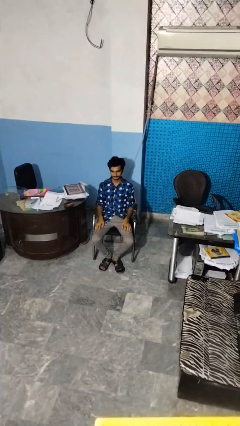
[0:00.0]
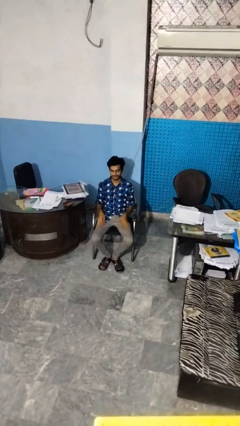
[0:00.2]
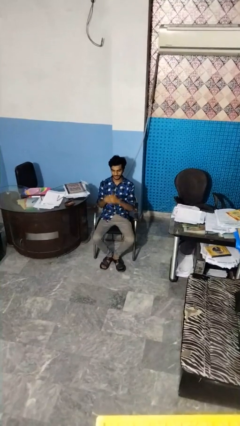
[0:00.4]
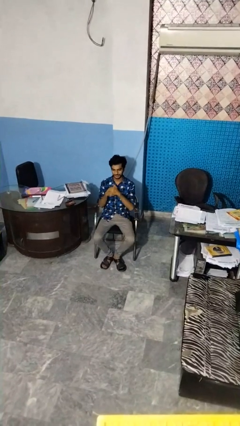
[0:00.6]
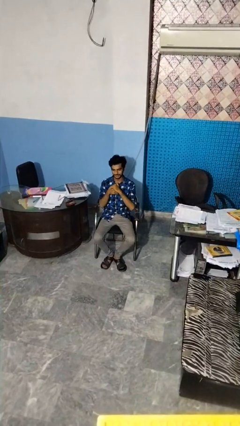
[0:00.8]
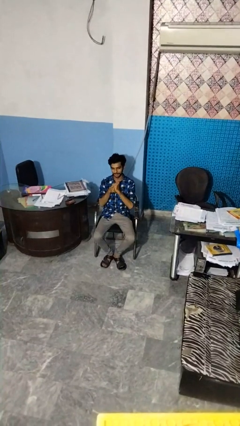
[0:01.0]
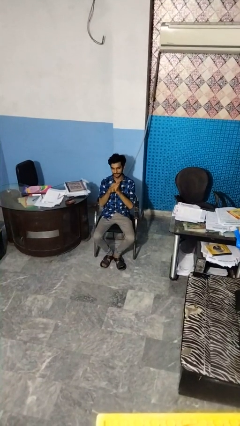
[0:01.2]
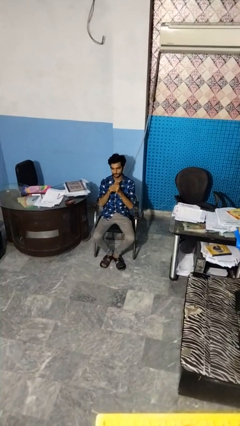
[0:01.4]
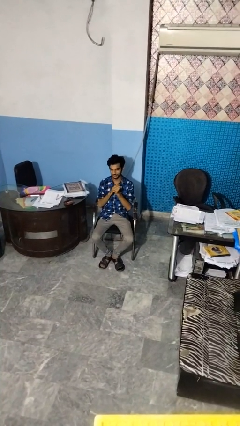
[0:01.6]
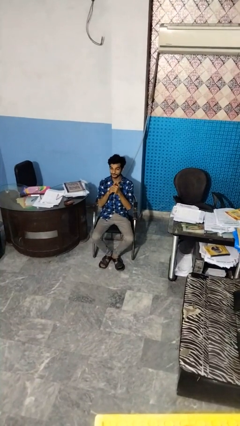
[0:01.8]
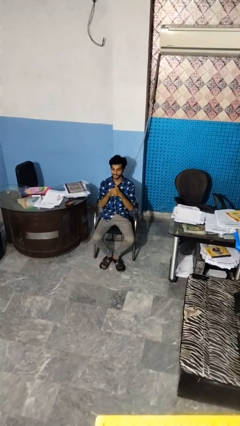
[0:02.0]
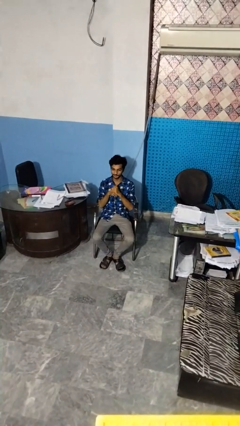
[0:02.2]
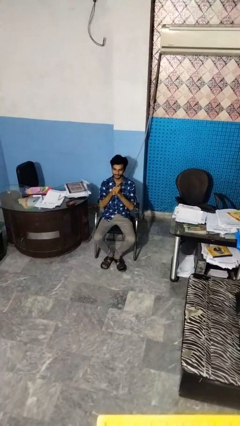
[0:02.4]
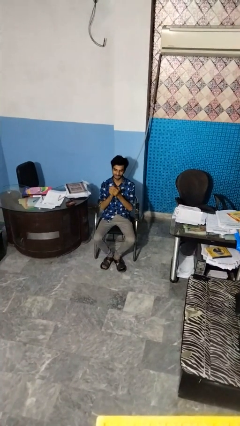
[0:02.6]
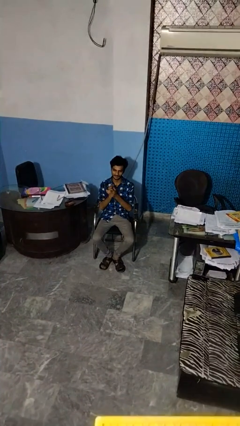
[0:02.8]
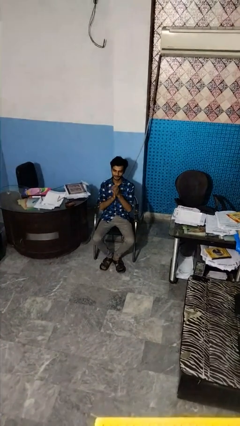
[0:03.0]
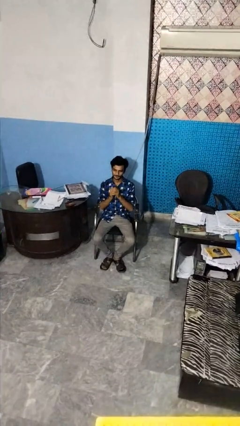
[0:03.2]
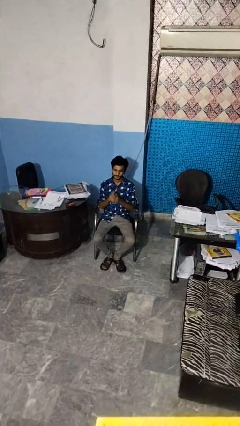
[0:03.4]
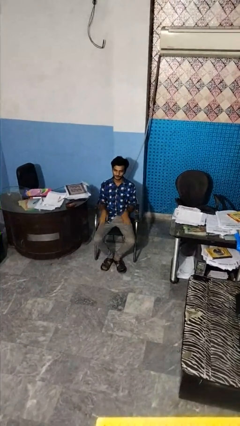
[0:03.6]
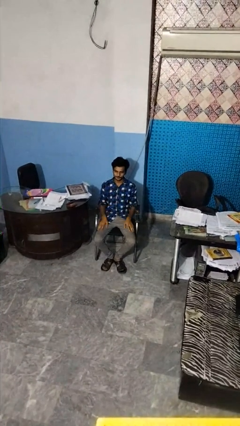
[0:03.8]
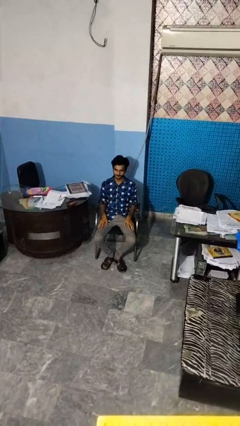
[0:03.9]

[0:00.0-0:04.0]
person cracks knuckles

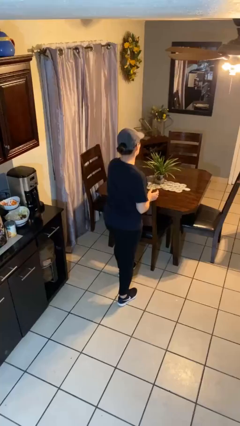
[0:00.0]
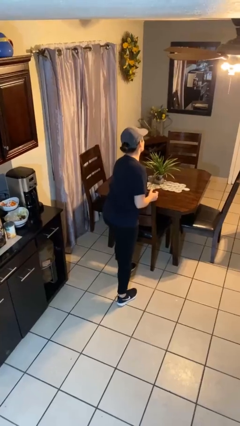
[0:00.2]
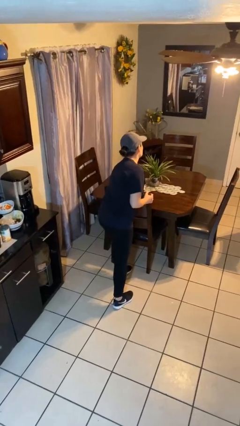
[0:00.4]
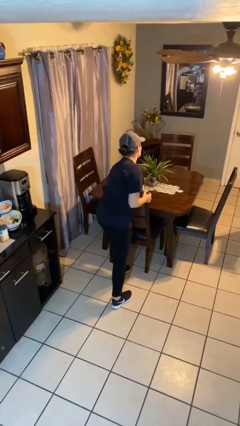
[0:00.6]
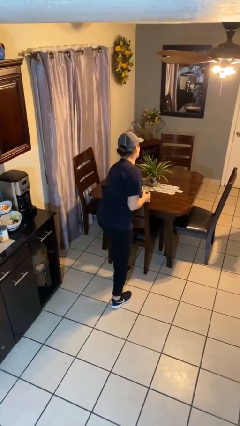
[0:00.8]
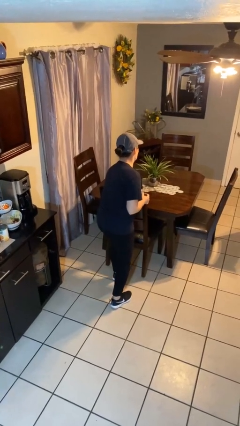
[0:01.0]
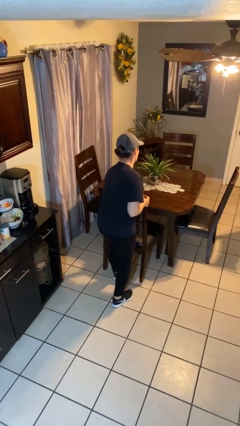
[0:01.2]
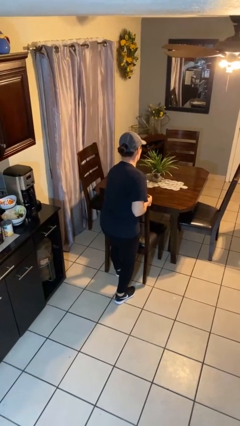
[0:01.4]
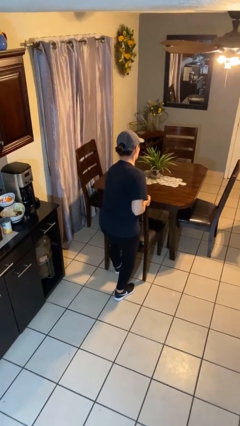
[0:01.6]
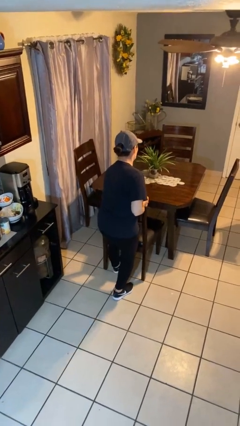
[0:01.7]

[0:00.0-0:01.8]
person pulls out chair

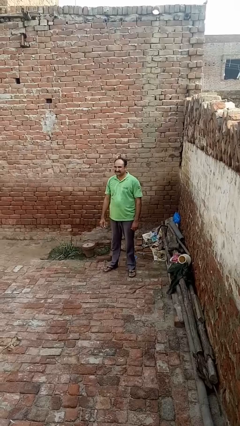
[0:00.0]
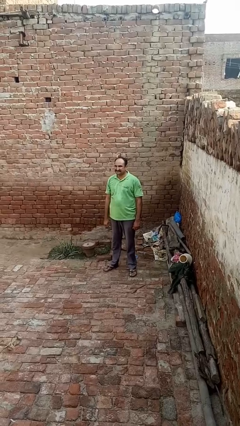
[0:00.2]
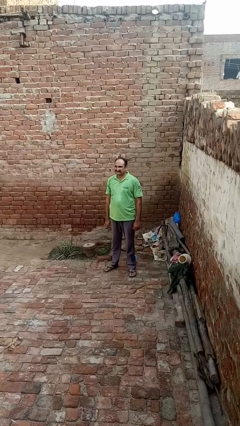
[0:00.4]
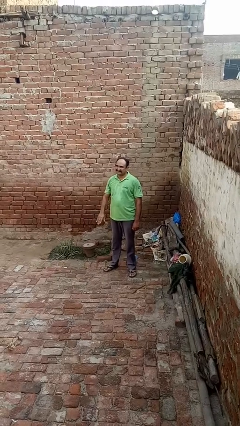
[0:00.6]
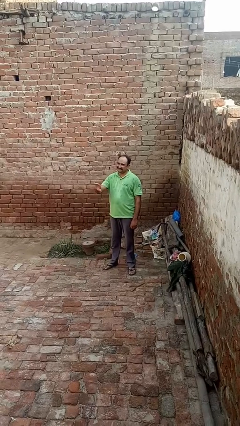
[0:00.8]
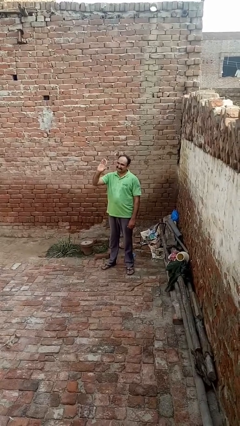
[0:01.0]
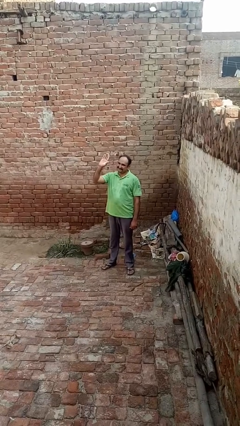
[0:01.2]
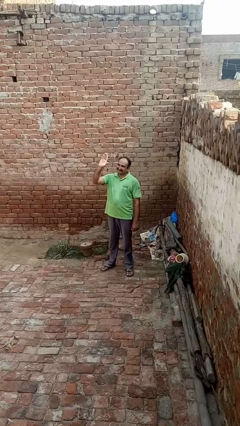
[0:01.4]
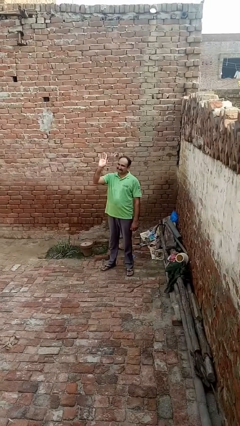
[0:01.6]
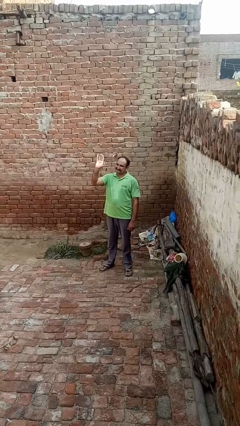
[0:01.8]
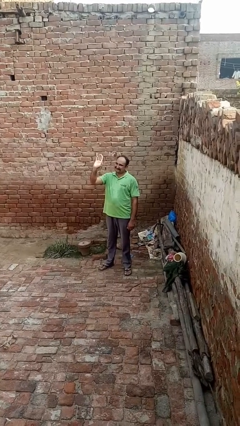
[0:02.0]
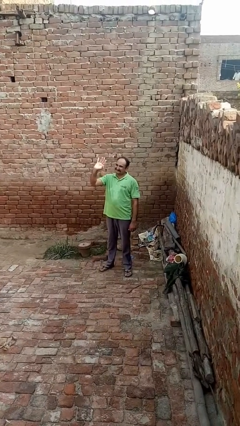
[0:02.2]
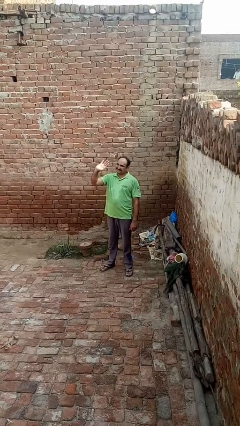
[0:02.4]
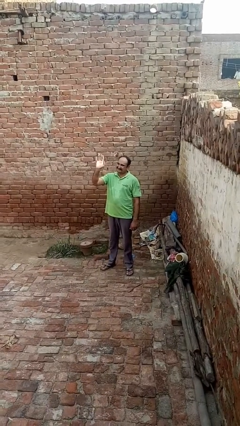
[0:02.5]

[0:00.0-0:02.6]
person waves at person

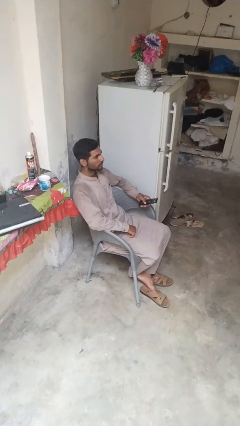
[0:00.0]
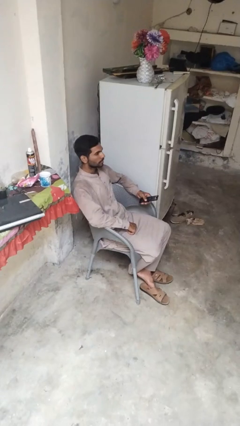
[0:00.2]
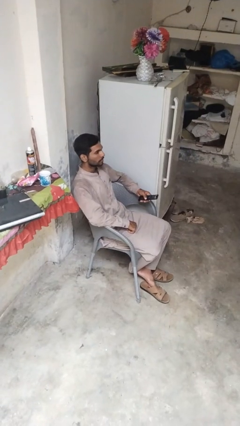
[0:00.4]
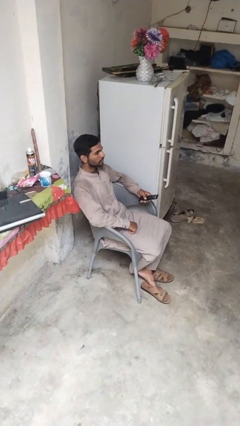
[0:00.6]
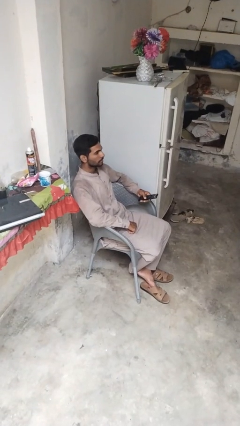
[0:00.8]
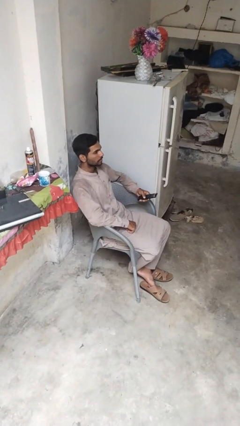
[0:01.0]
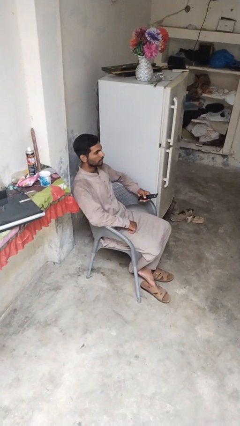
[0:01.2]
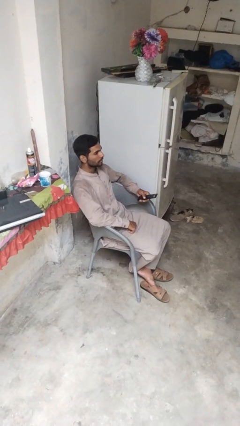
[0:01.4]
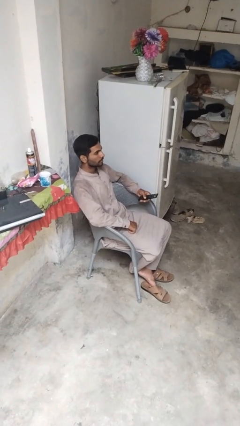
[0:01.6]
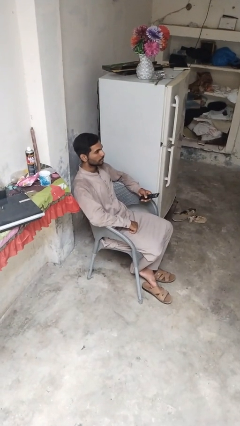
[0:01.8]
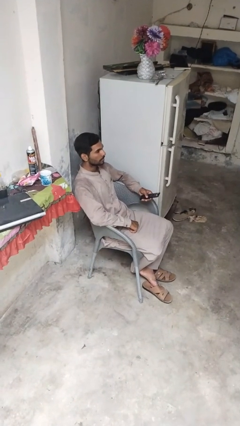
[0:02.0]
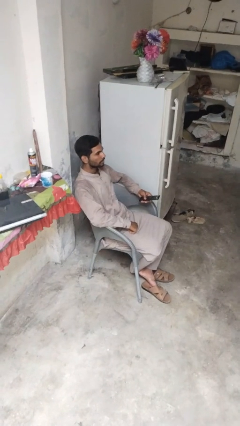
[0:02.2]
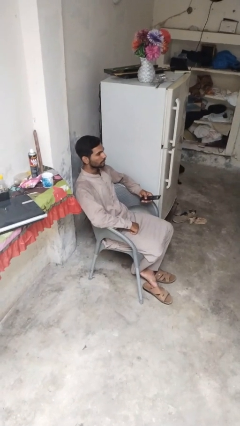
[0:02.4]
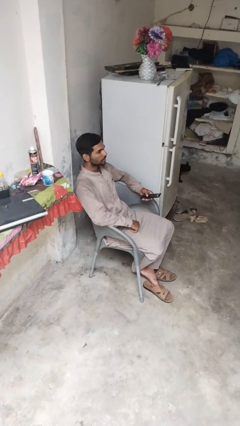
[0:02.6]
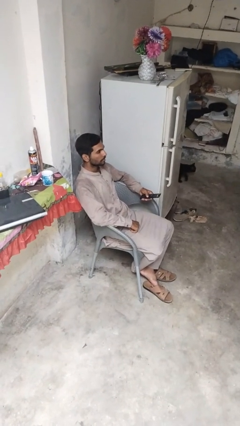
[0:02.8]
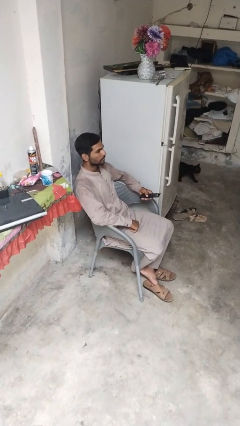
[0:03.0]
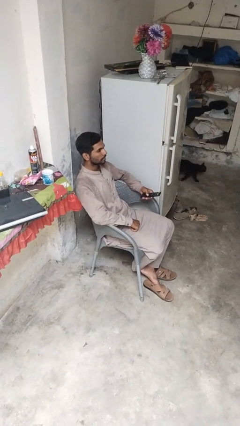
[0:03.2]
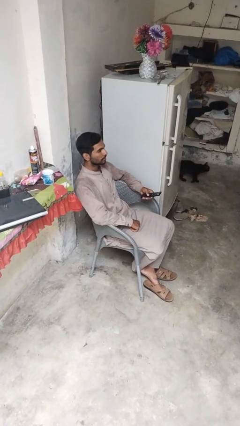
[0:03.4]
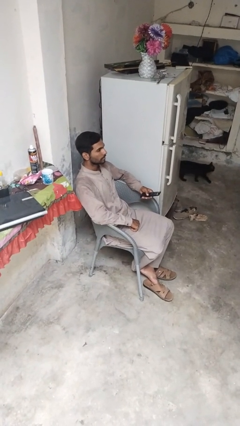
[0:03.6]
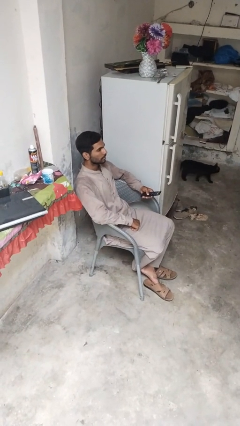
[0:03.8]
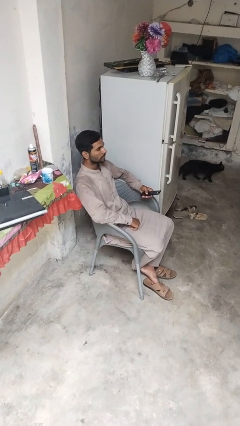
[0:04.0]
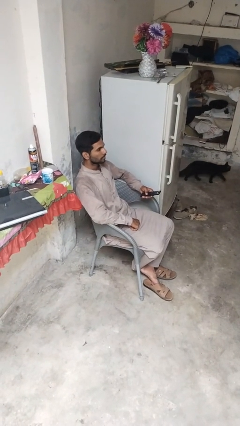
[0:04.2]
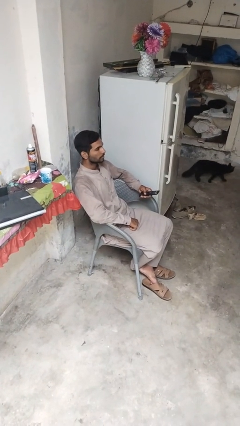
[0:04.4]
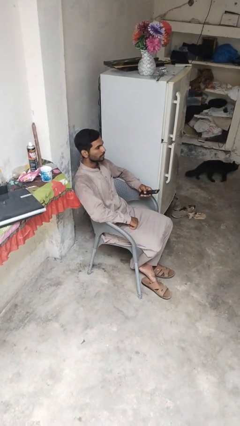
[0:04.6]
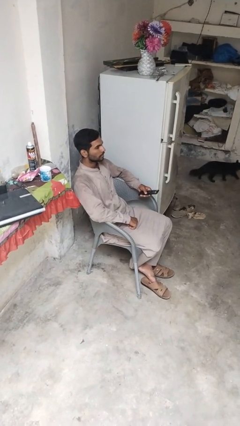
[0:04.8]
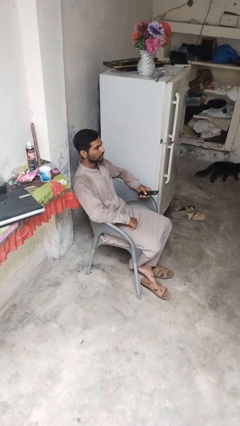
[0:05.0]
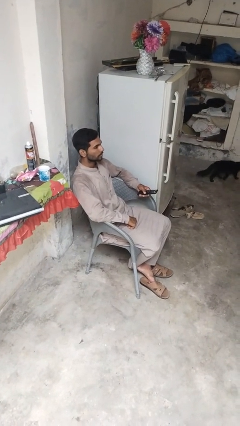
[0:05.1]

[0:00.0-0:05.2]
person uses television remote

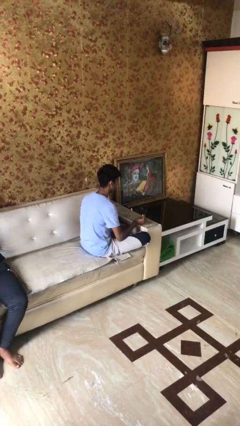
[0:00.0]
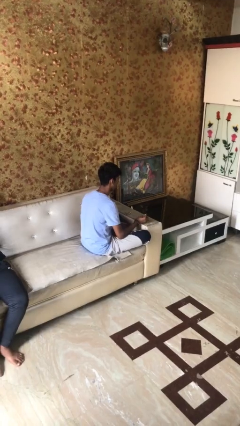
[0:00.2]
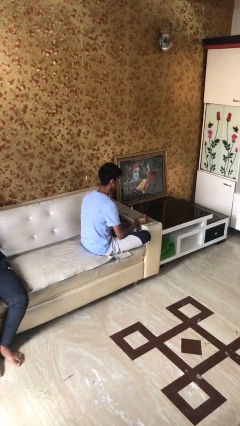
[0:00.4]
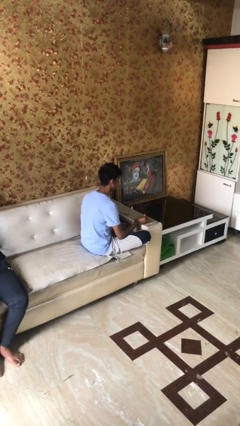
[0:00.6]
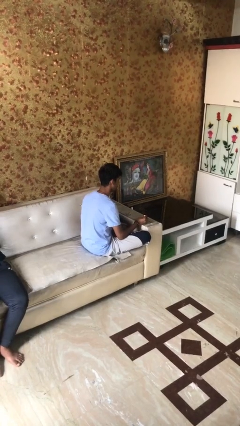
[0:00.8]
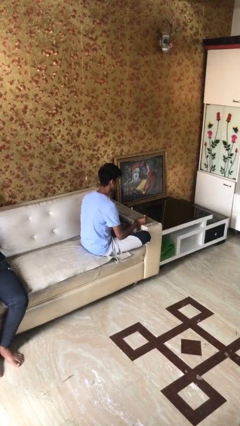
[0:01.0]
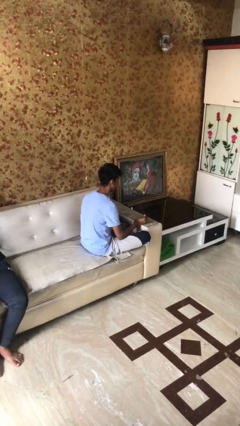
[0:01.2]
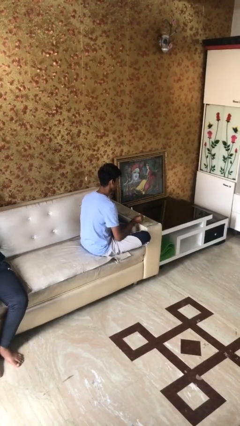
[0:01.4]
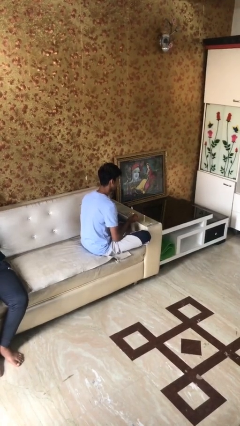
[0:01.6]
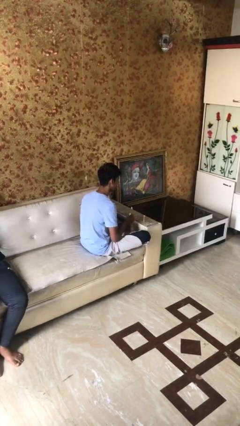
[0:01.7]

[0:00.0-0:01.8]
person lights candle

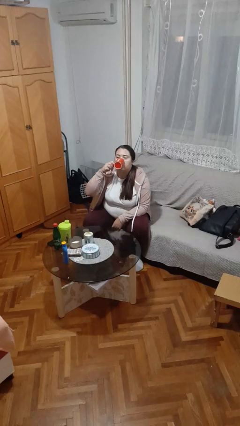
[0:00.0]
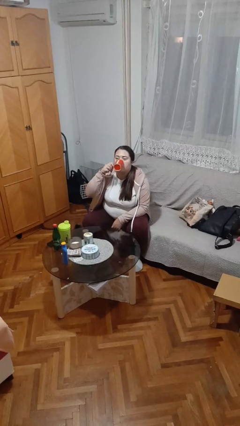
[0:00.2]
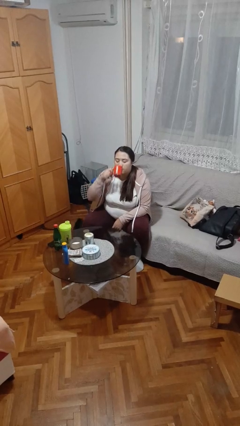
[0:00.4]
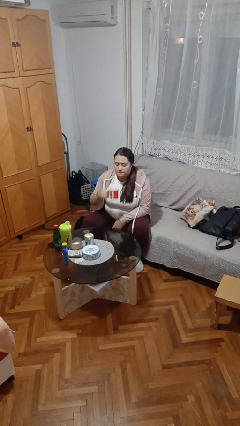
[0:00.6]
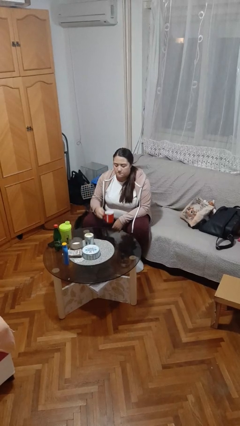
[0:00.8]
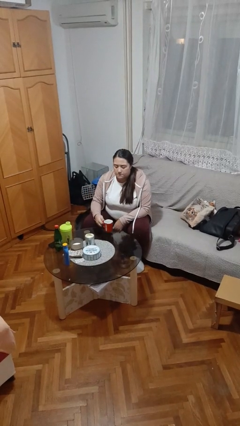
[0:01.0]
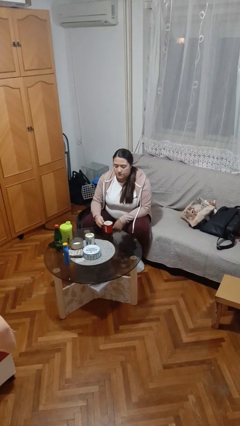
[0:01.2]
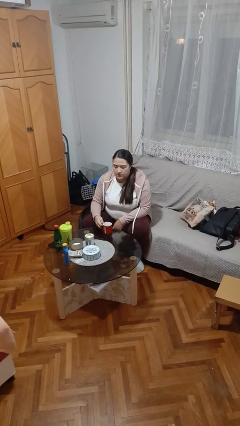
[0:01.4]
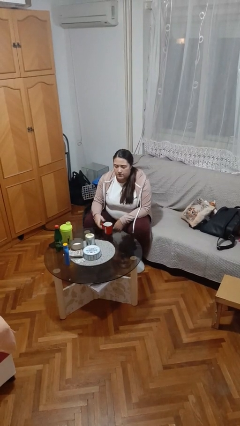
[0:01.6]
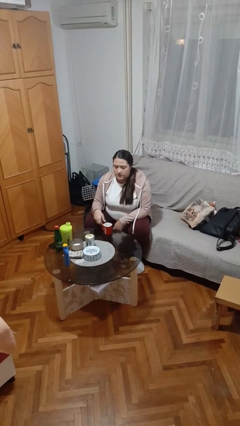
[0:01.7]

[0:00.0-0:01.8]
person puts down object on table

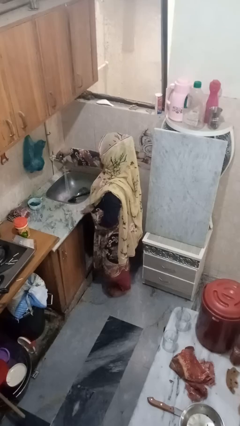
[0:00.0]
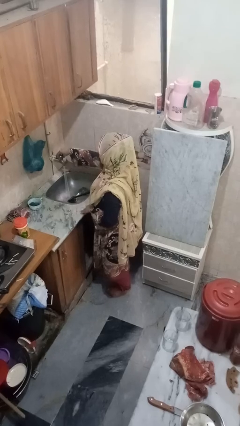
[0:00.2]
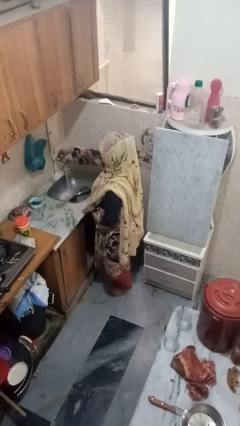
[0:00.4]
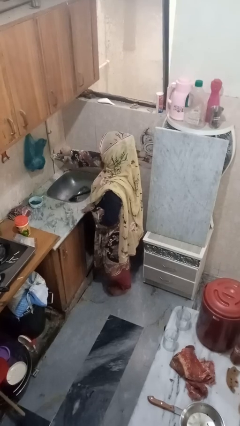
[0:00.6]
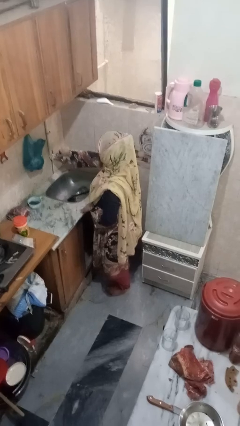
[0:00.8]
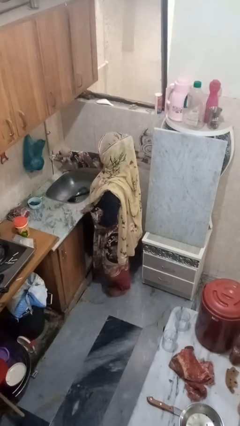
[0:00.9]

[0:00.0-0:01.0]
person turns off faucet
